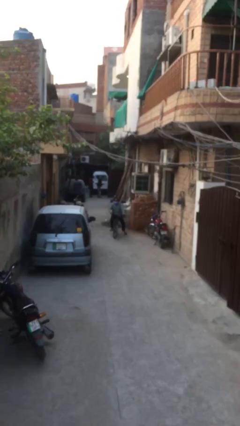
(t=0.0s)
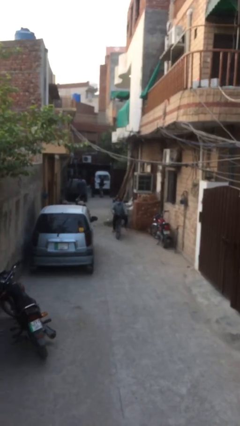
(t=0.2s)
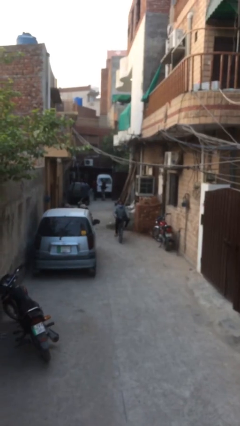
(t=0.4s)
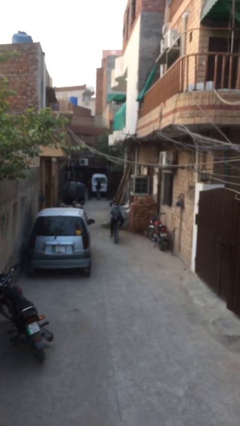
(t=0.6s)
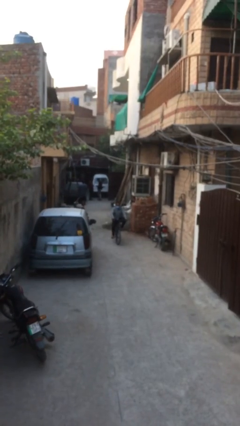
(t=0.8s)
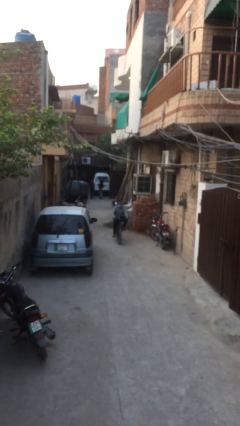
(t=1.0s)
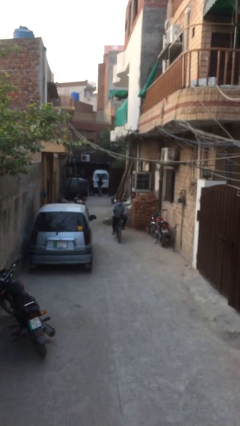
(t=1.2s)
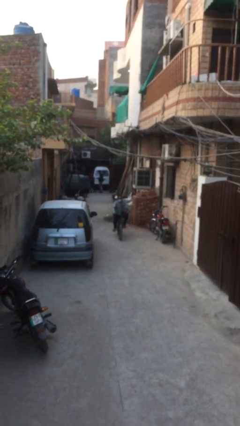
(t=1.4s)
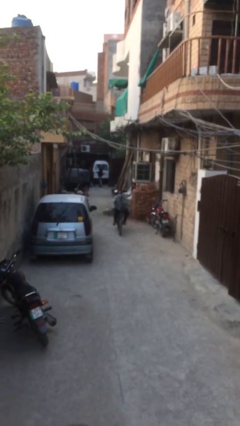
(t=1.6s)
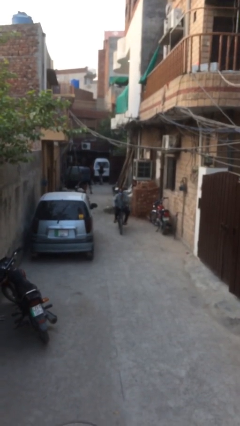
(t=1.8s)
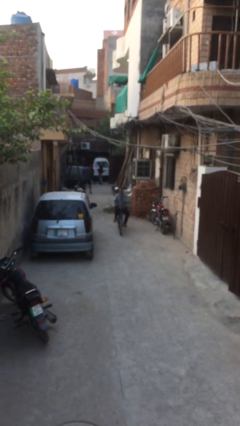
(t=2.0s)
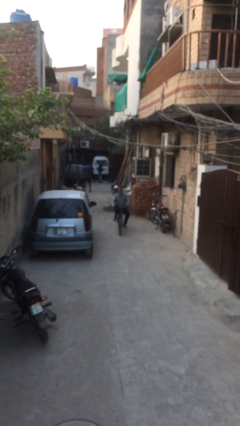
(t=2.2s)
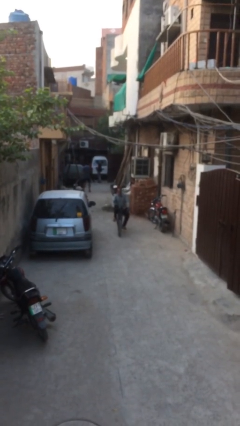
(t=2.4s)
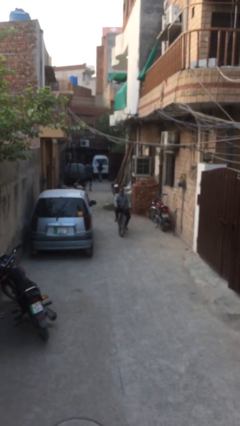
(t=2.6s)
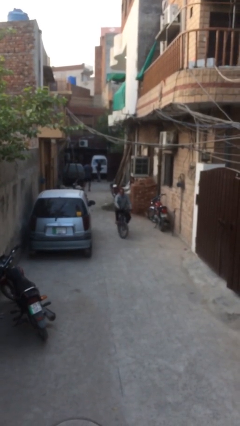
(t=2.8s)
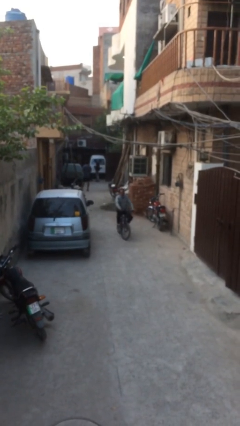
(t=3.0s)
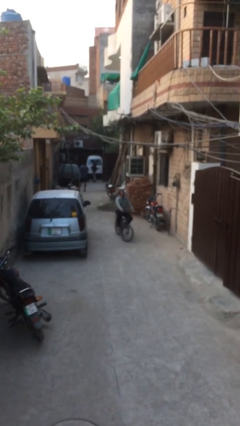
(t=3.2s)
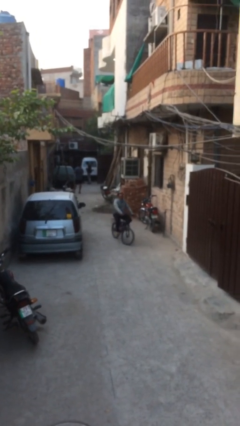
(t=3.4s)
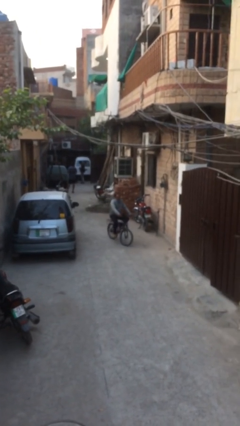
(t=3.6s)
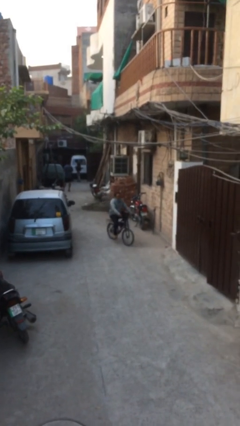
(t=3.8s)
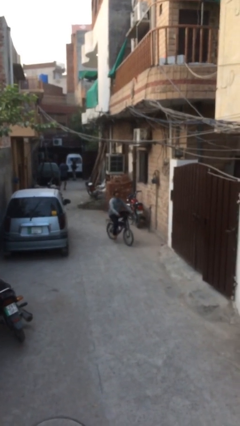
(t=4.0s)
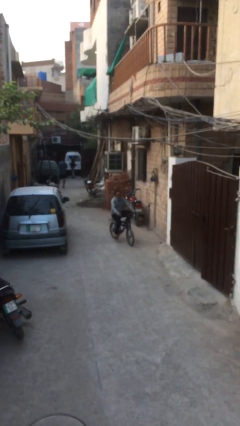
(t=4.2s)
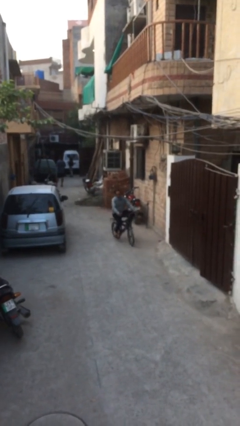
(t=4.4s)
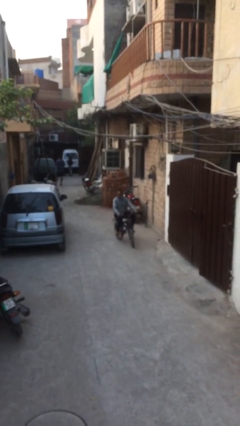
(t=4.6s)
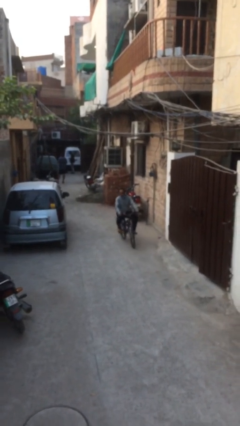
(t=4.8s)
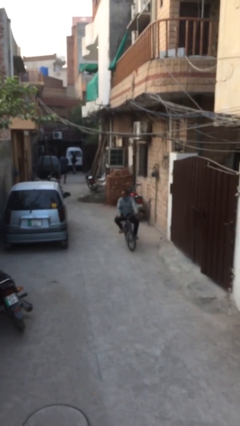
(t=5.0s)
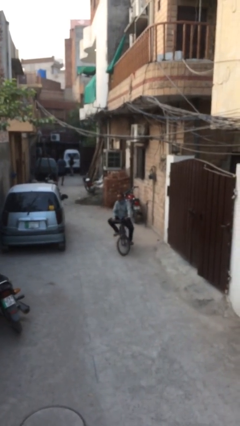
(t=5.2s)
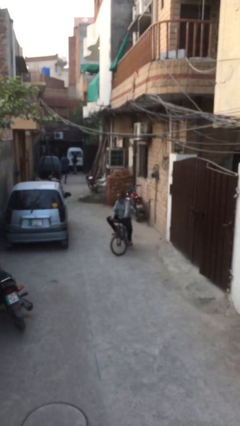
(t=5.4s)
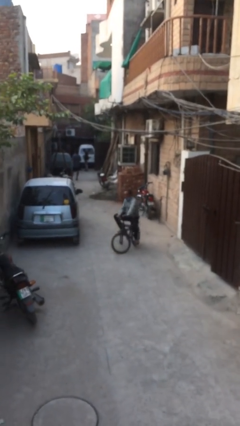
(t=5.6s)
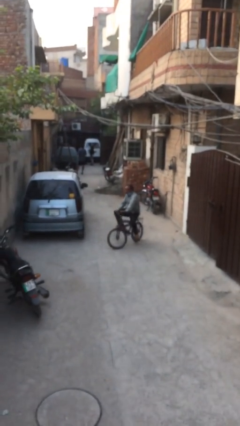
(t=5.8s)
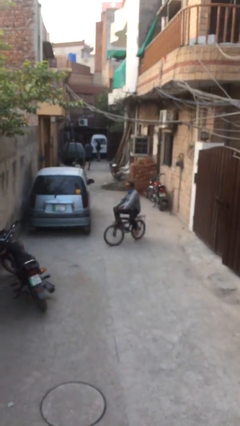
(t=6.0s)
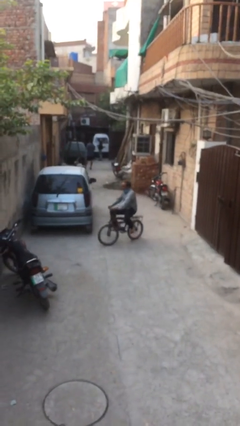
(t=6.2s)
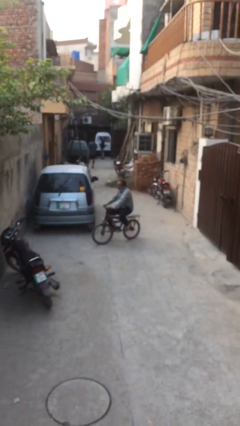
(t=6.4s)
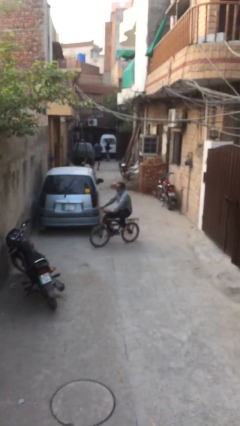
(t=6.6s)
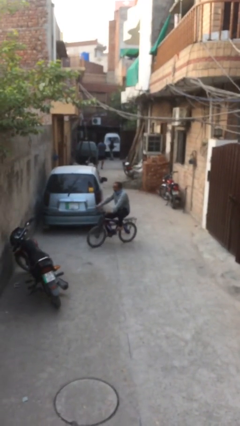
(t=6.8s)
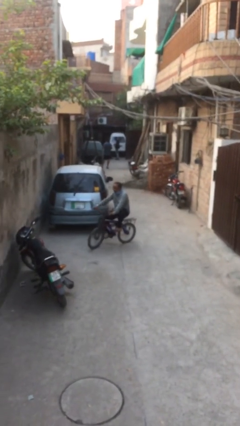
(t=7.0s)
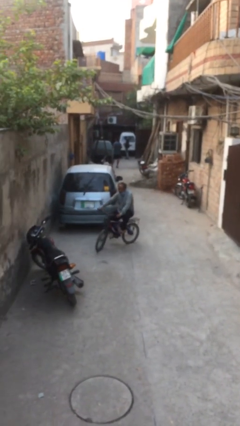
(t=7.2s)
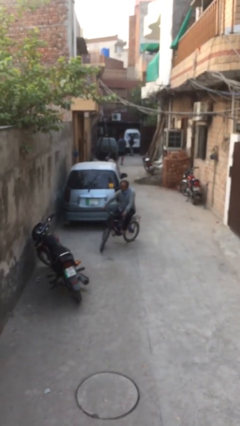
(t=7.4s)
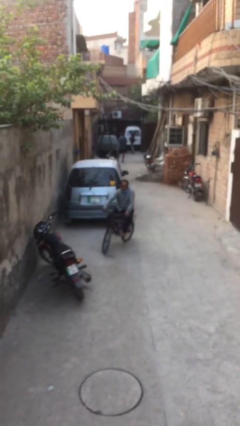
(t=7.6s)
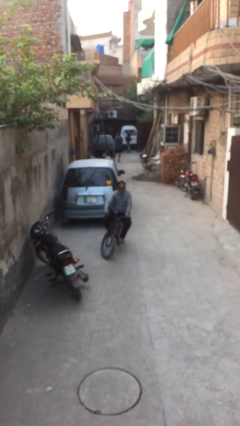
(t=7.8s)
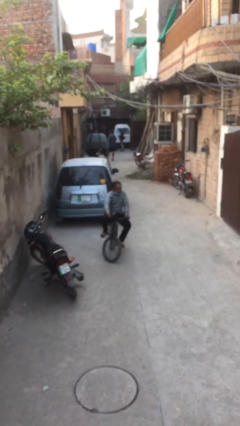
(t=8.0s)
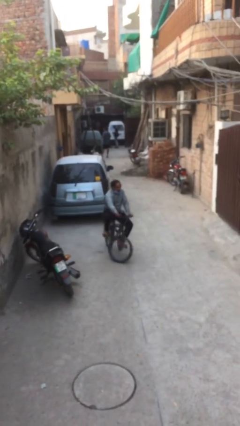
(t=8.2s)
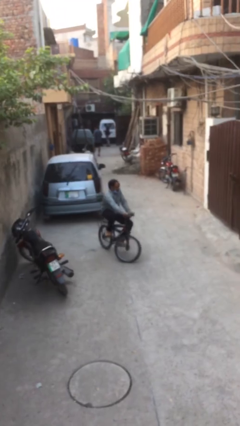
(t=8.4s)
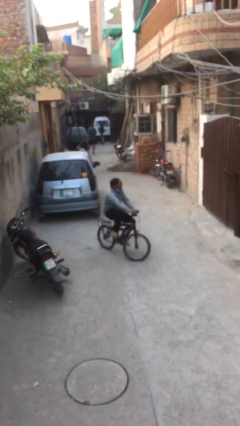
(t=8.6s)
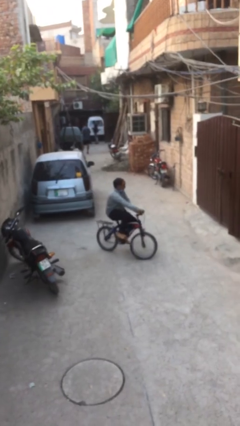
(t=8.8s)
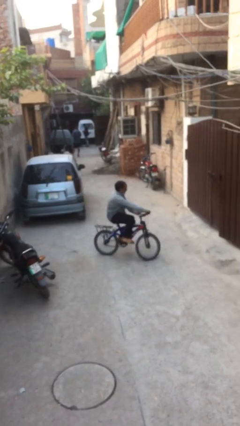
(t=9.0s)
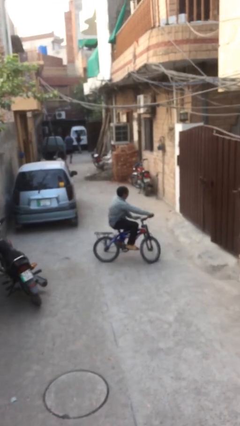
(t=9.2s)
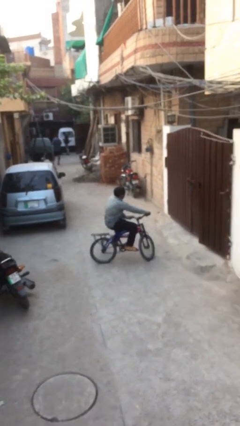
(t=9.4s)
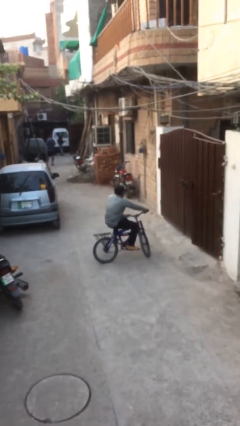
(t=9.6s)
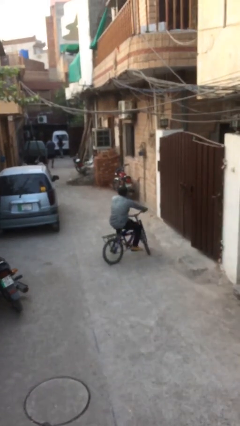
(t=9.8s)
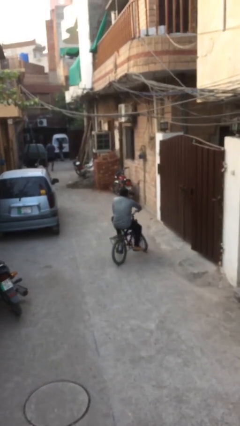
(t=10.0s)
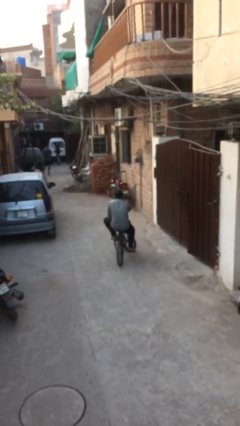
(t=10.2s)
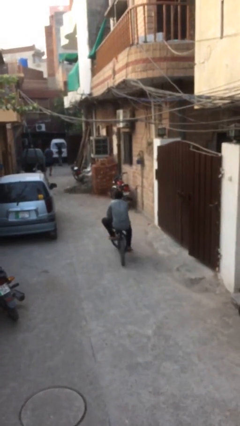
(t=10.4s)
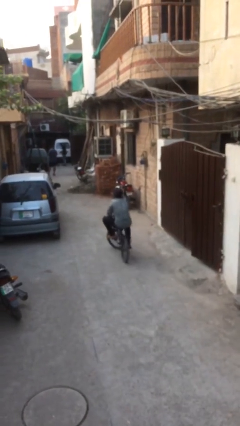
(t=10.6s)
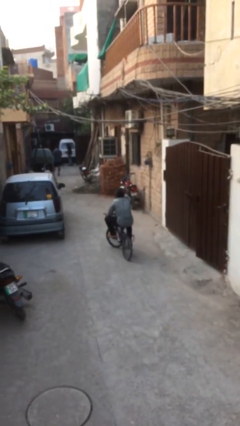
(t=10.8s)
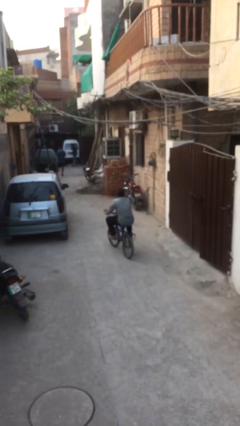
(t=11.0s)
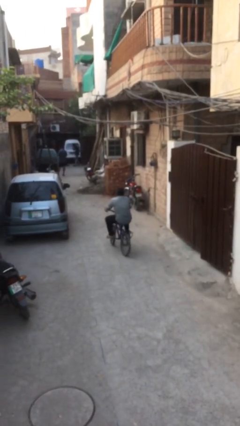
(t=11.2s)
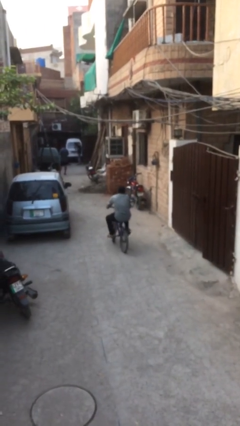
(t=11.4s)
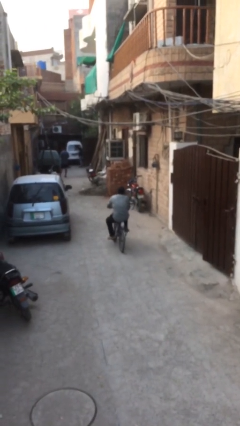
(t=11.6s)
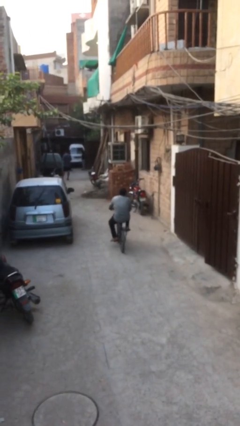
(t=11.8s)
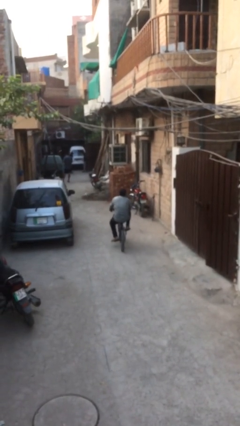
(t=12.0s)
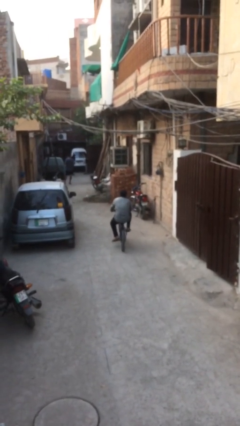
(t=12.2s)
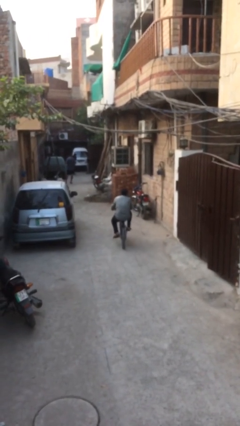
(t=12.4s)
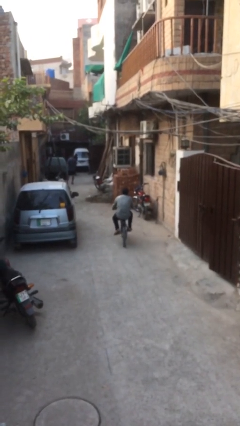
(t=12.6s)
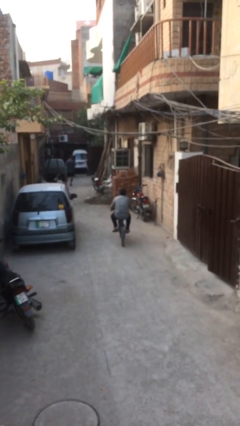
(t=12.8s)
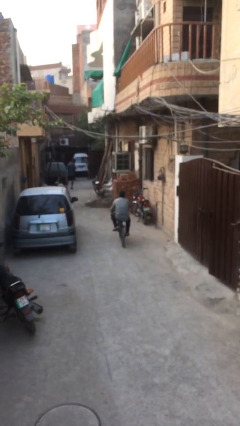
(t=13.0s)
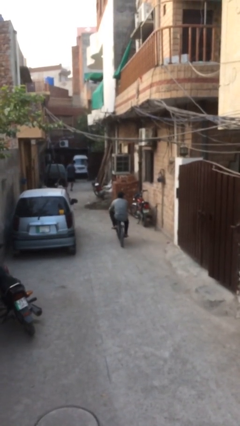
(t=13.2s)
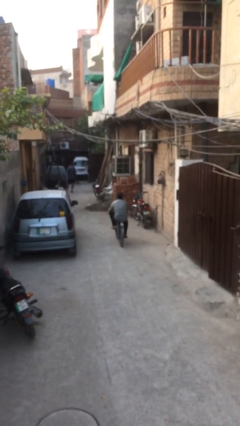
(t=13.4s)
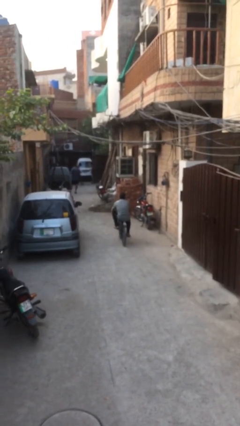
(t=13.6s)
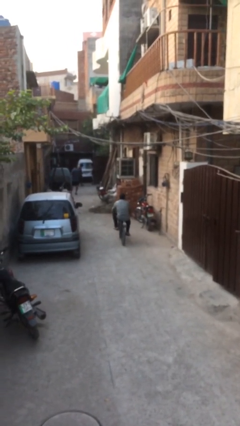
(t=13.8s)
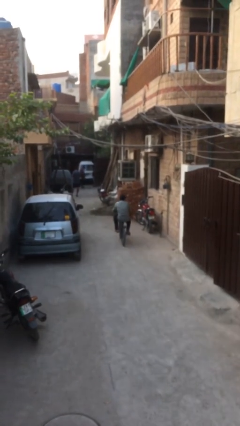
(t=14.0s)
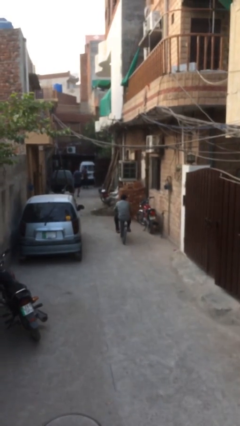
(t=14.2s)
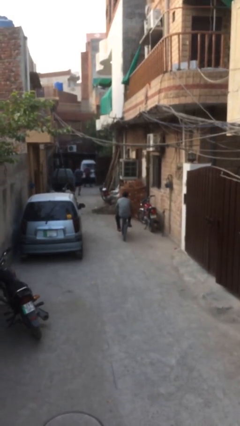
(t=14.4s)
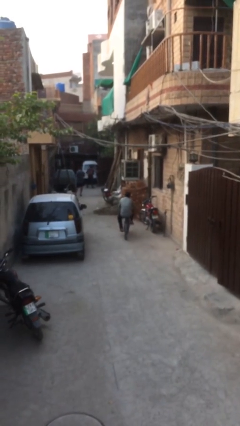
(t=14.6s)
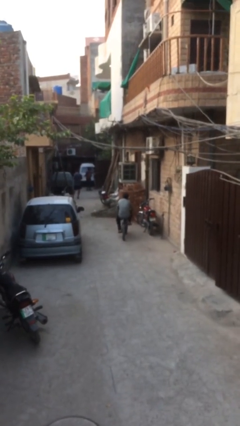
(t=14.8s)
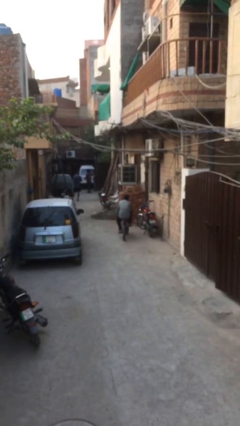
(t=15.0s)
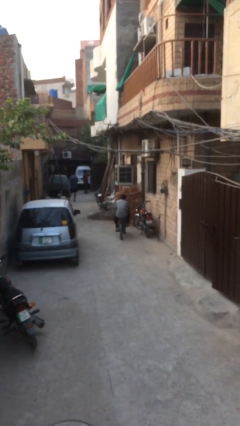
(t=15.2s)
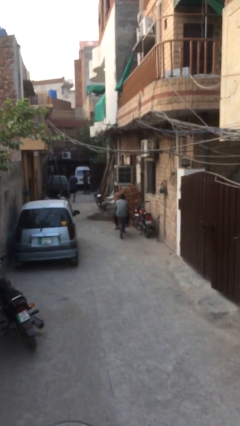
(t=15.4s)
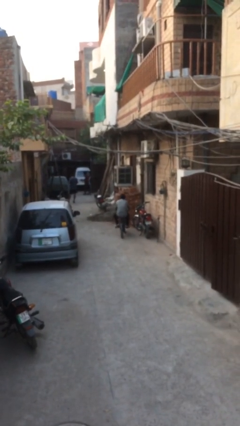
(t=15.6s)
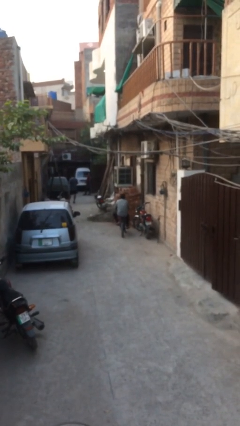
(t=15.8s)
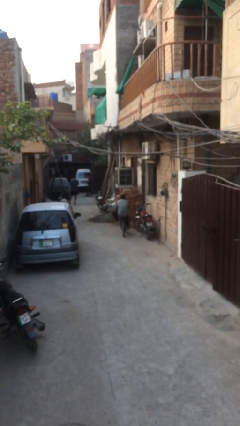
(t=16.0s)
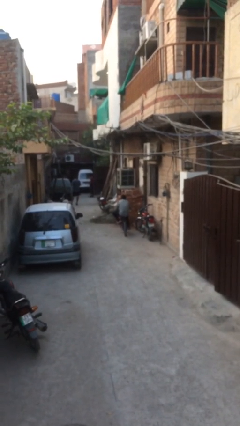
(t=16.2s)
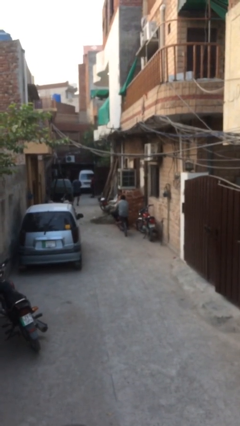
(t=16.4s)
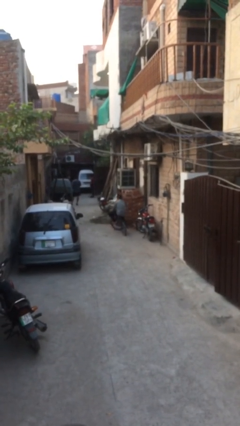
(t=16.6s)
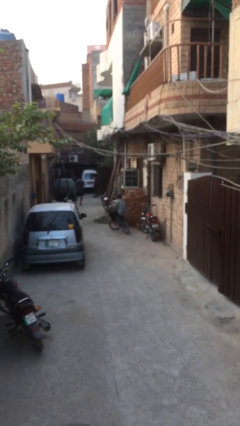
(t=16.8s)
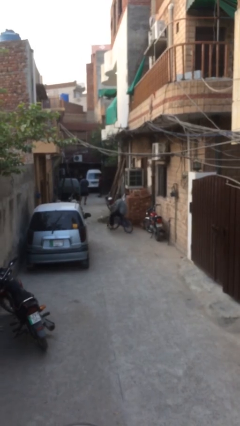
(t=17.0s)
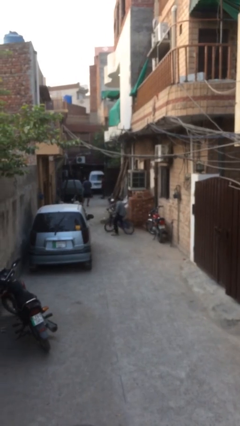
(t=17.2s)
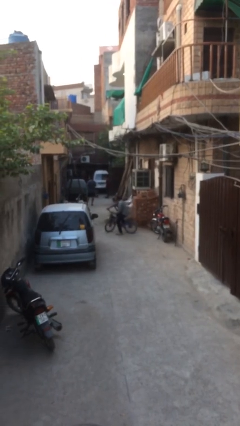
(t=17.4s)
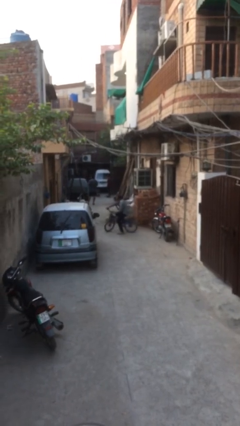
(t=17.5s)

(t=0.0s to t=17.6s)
person rides bicycle

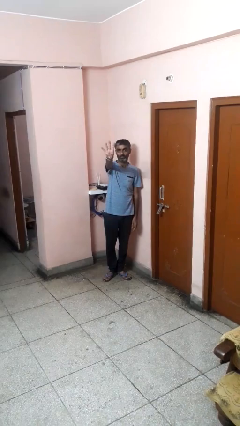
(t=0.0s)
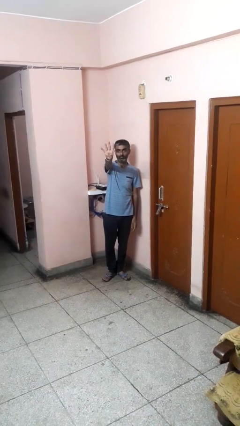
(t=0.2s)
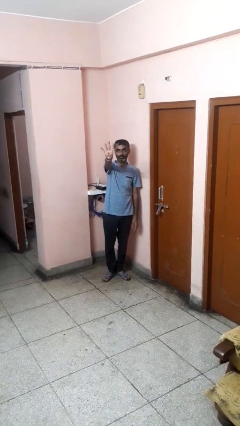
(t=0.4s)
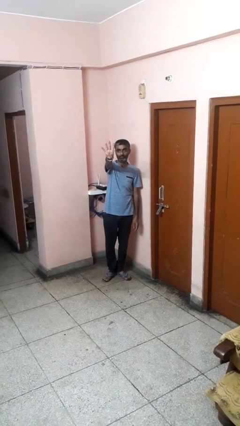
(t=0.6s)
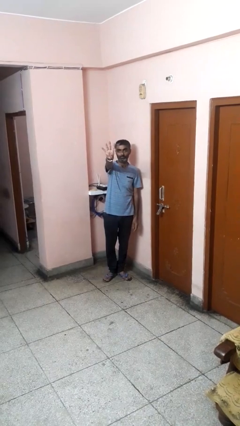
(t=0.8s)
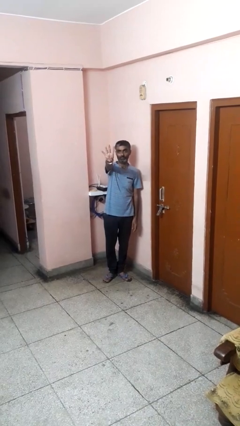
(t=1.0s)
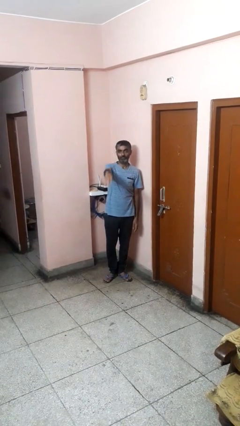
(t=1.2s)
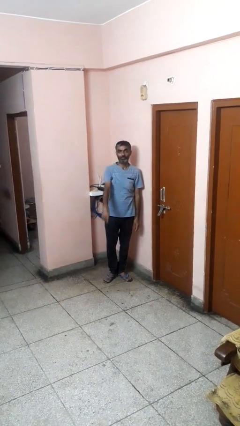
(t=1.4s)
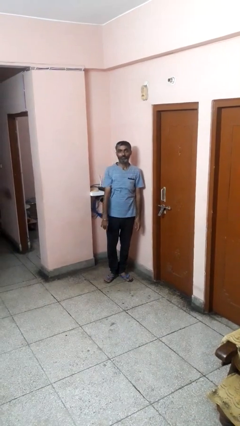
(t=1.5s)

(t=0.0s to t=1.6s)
person gestures number four
